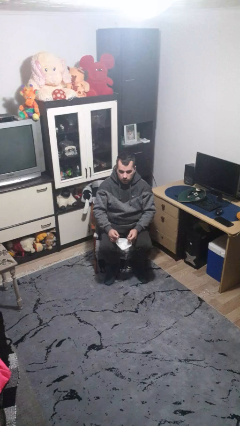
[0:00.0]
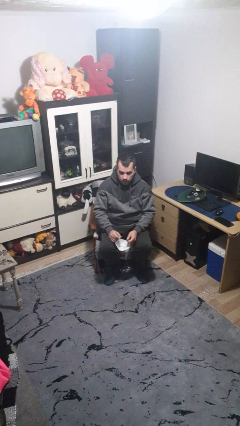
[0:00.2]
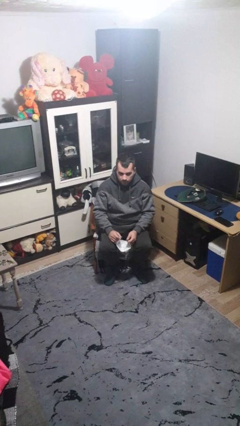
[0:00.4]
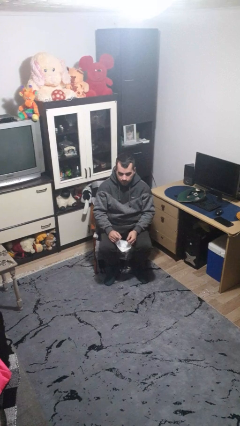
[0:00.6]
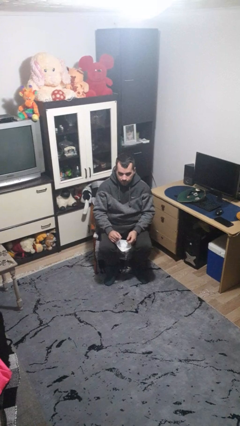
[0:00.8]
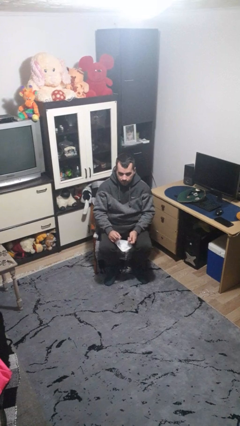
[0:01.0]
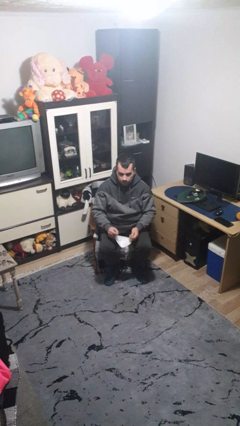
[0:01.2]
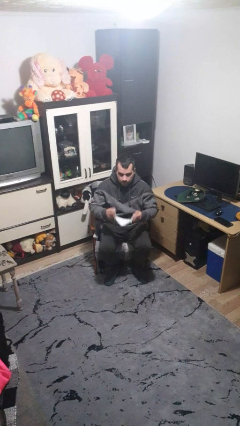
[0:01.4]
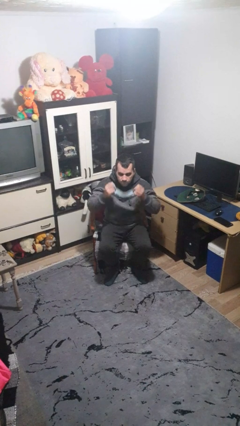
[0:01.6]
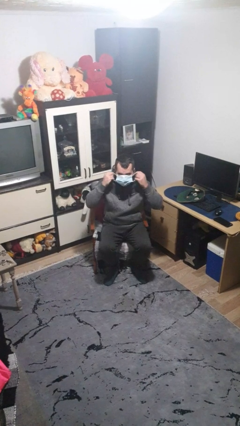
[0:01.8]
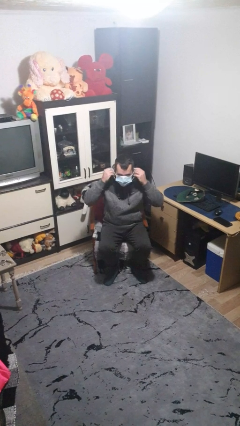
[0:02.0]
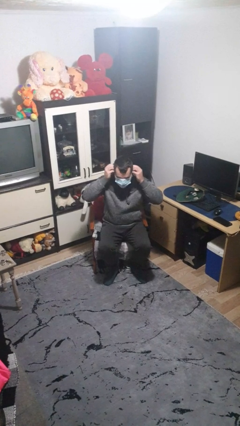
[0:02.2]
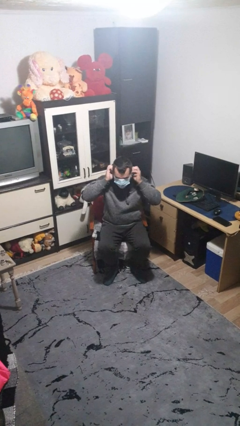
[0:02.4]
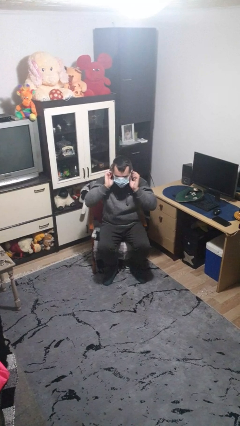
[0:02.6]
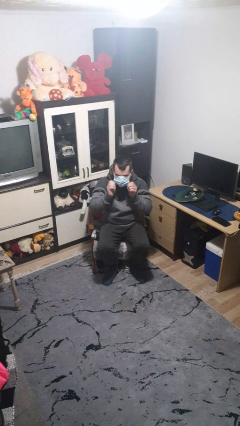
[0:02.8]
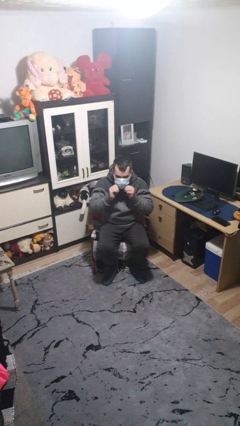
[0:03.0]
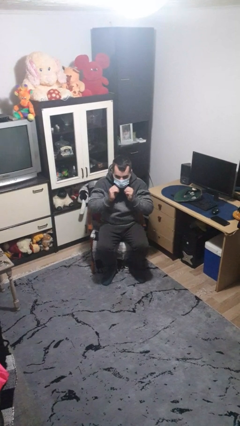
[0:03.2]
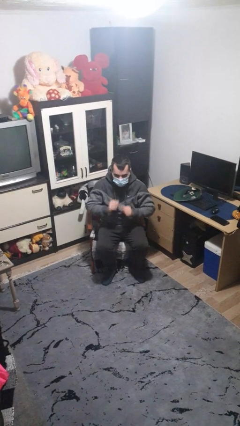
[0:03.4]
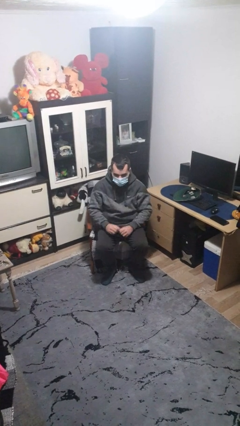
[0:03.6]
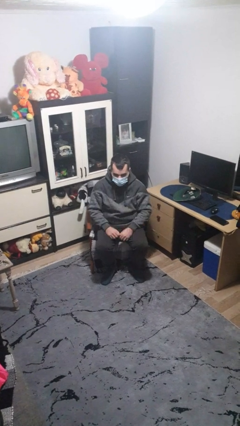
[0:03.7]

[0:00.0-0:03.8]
person puts on facemask

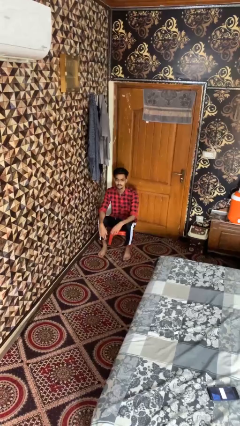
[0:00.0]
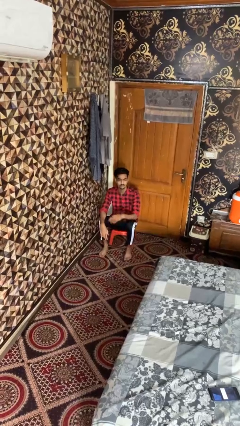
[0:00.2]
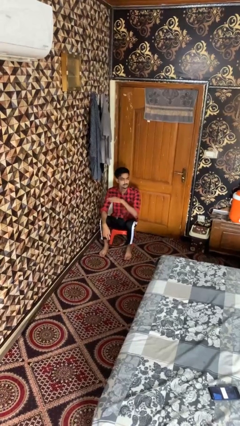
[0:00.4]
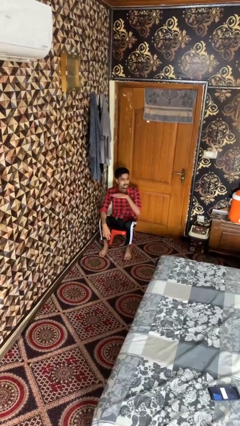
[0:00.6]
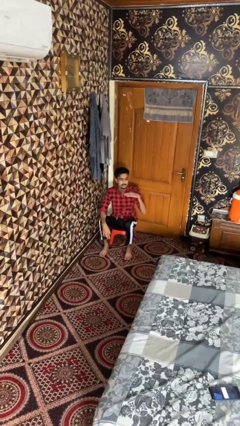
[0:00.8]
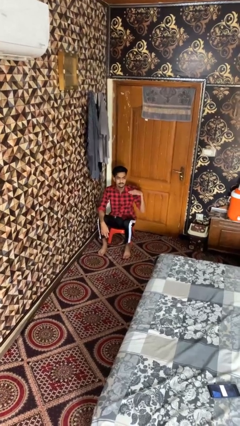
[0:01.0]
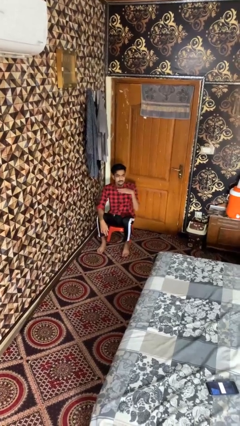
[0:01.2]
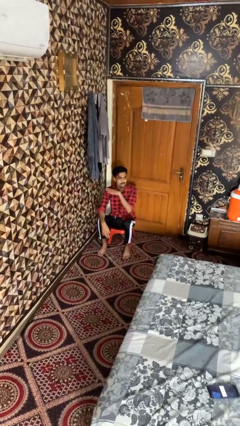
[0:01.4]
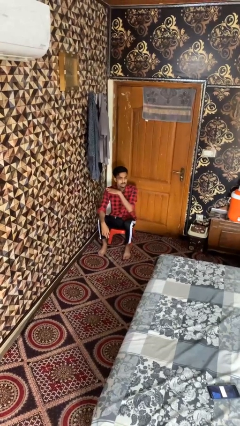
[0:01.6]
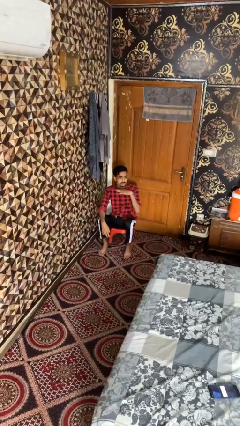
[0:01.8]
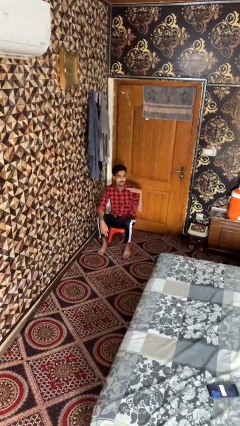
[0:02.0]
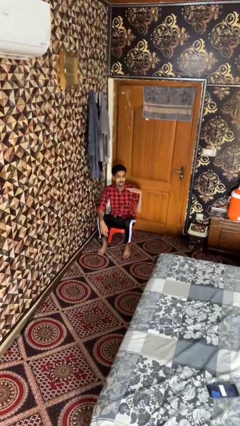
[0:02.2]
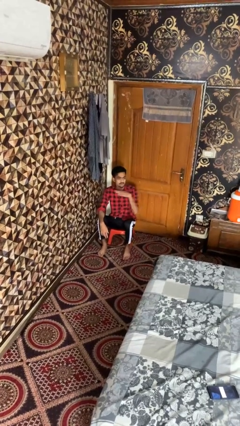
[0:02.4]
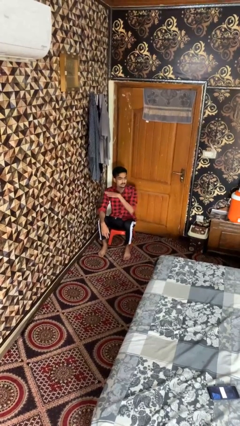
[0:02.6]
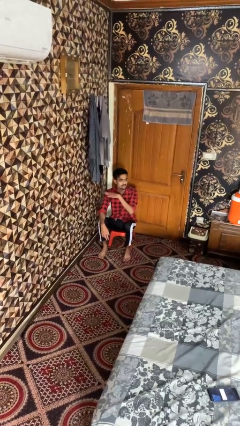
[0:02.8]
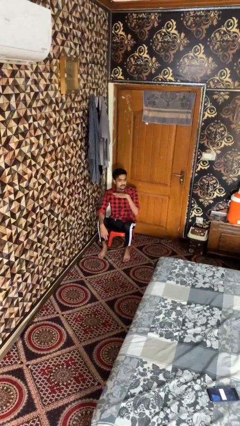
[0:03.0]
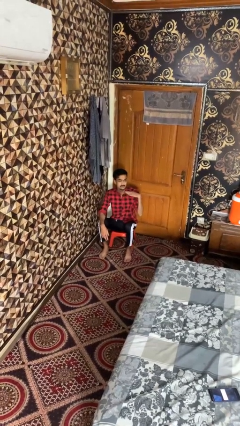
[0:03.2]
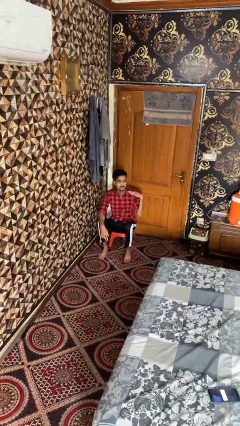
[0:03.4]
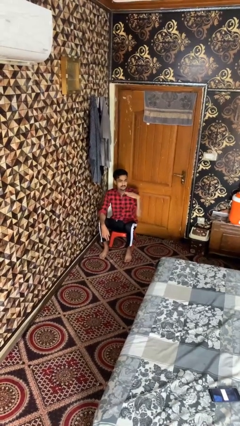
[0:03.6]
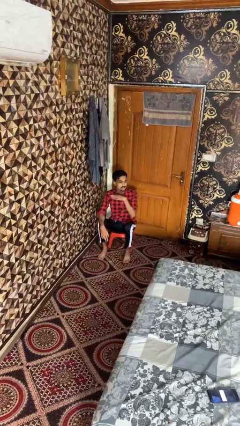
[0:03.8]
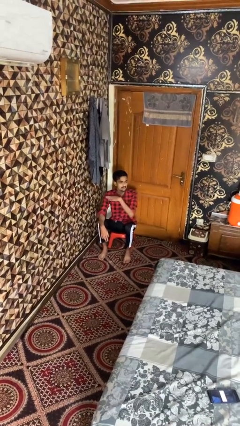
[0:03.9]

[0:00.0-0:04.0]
person gestures cut

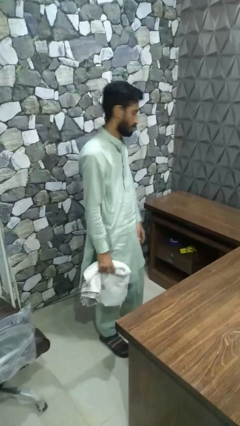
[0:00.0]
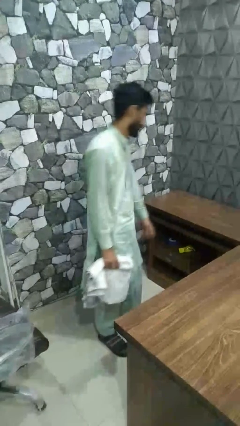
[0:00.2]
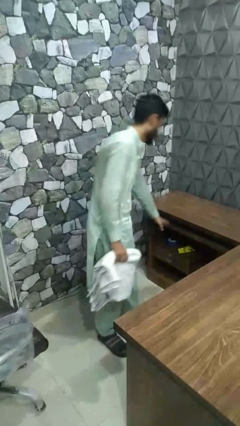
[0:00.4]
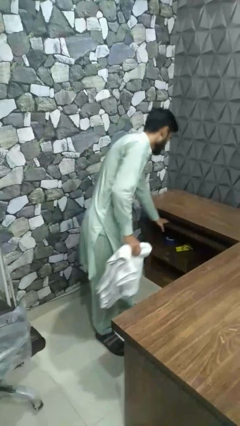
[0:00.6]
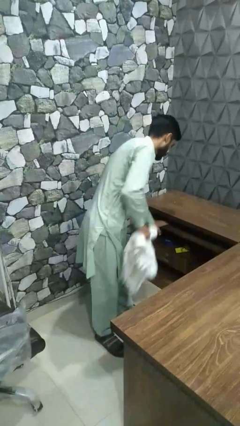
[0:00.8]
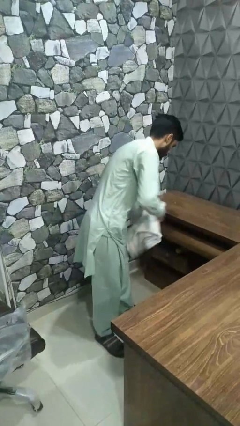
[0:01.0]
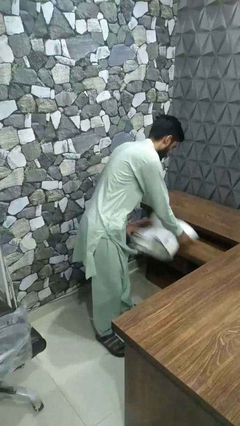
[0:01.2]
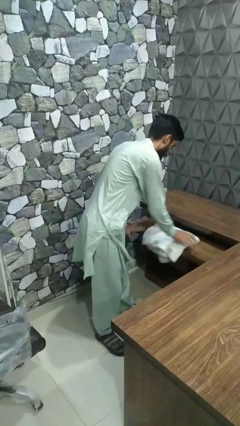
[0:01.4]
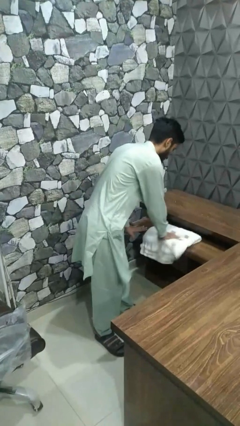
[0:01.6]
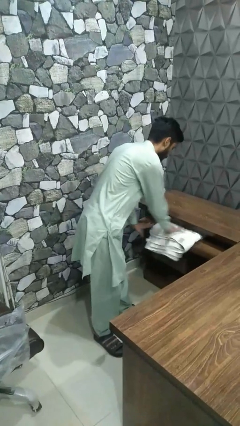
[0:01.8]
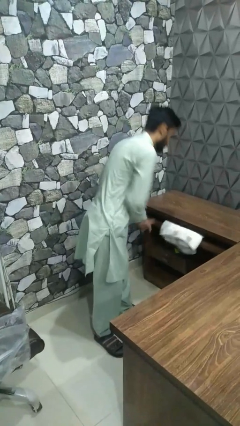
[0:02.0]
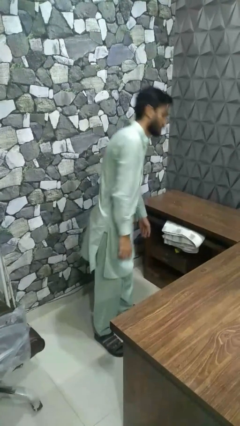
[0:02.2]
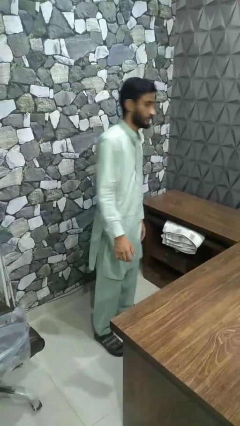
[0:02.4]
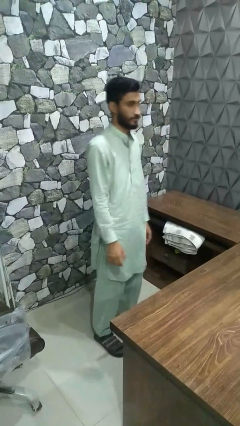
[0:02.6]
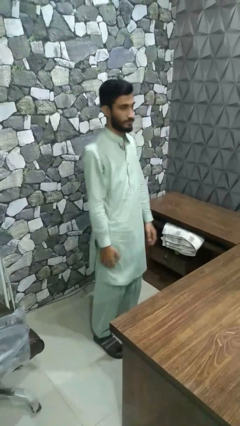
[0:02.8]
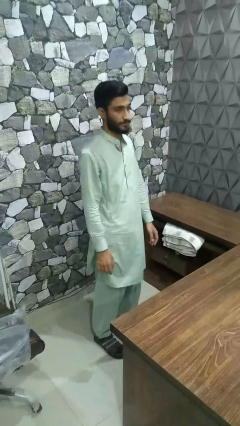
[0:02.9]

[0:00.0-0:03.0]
person puts clothes into dresser

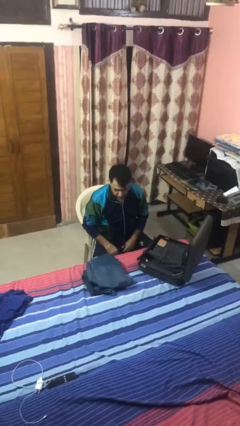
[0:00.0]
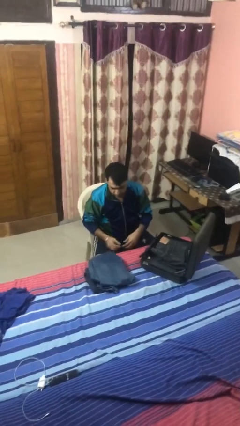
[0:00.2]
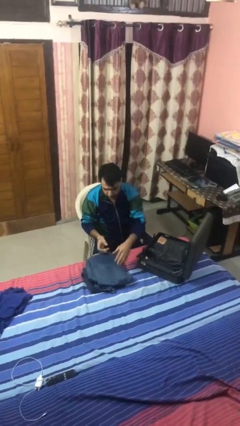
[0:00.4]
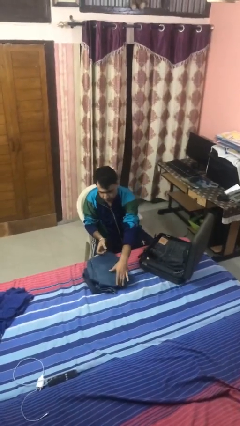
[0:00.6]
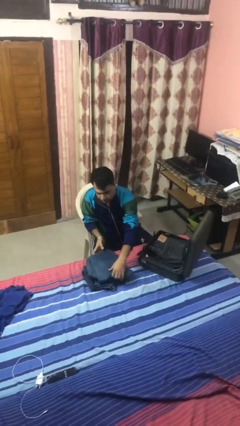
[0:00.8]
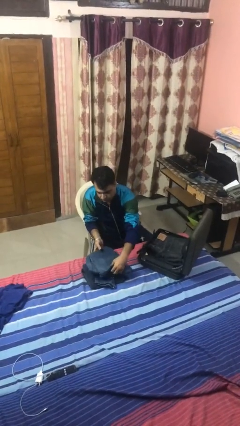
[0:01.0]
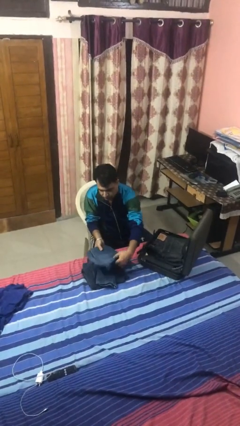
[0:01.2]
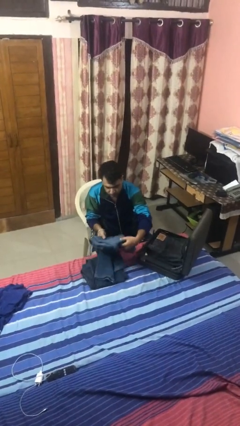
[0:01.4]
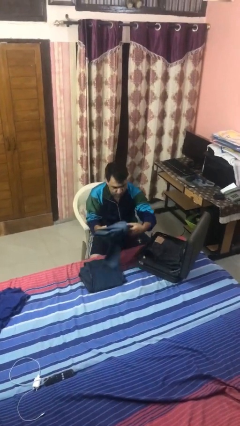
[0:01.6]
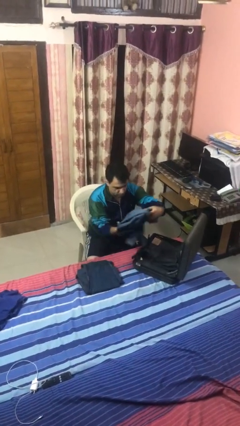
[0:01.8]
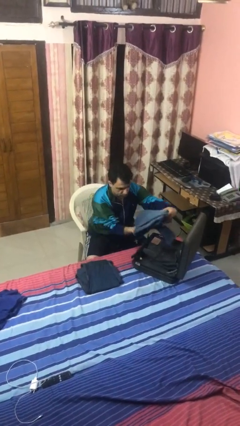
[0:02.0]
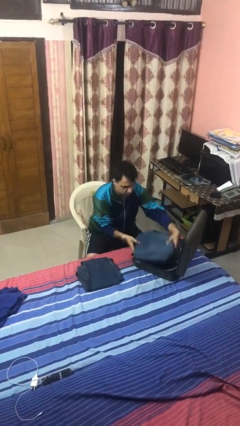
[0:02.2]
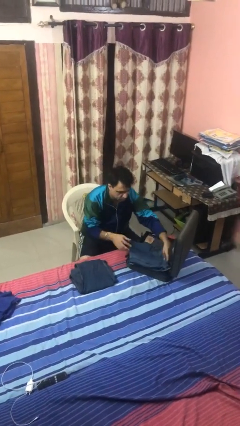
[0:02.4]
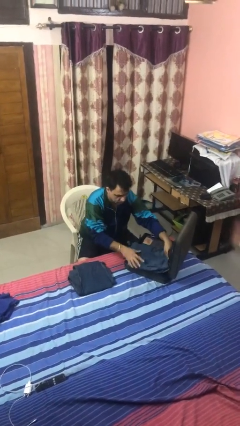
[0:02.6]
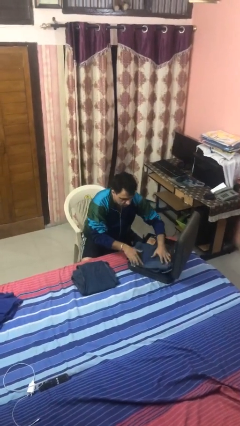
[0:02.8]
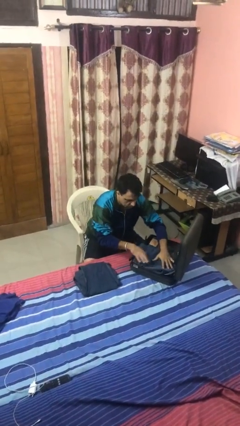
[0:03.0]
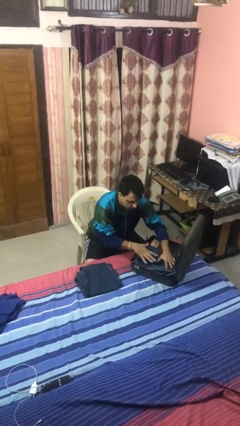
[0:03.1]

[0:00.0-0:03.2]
person loads clothes into suitcase

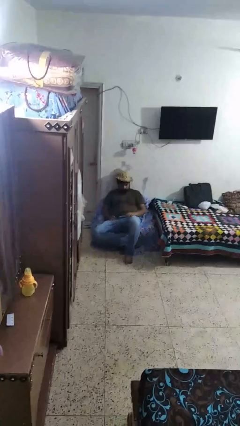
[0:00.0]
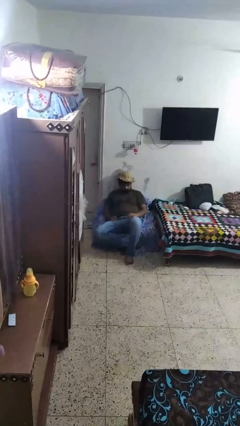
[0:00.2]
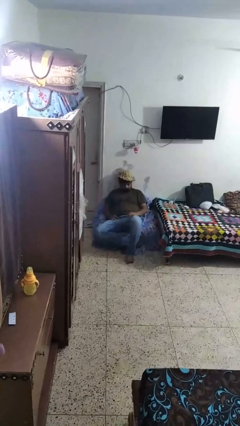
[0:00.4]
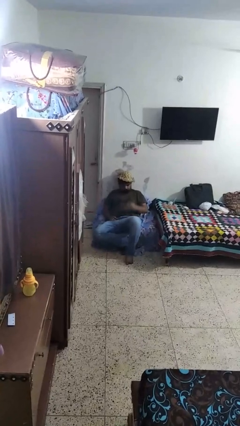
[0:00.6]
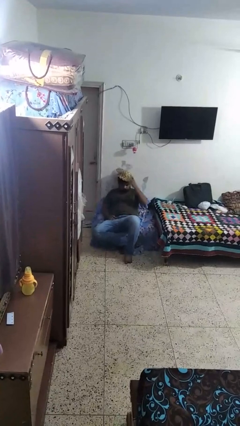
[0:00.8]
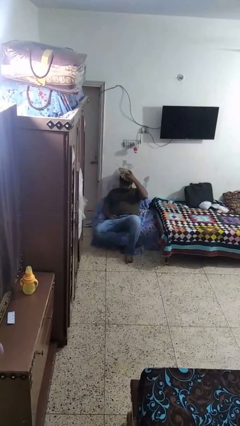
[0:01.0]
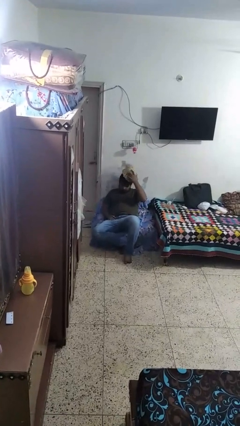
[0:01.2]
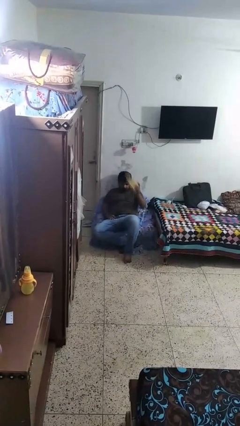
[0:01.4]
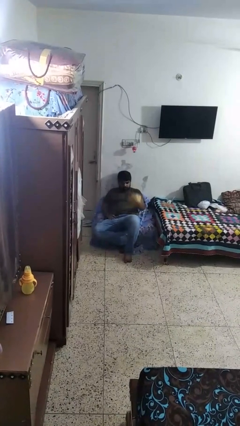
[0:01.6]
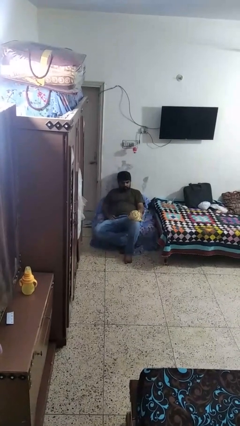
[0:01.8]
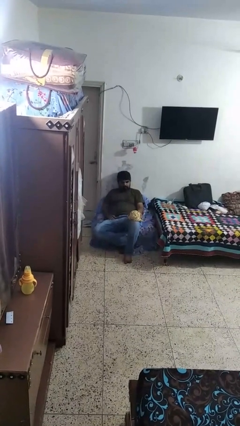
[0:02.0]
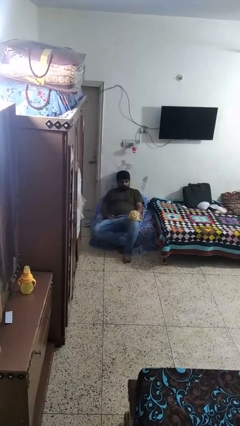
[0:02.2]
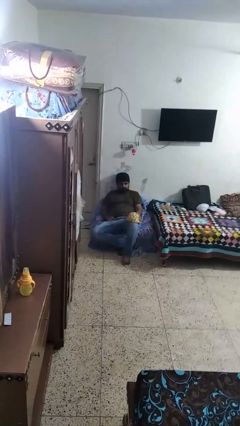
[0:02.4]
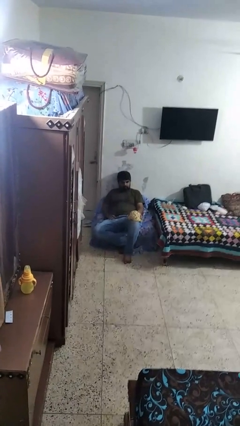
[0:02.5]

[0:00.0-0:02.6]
person takes off hat

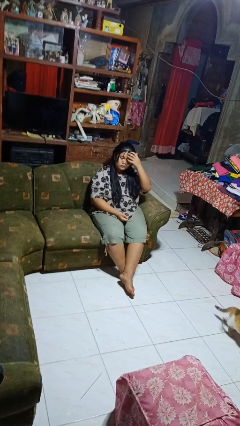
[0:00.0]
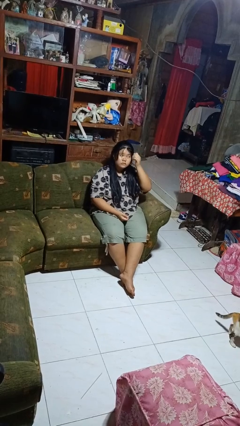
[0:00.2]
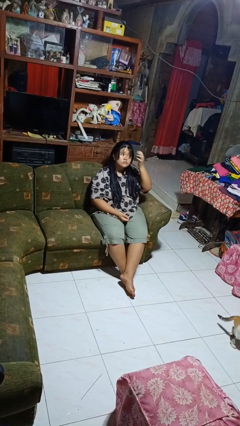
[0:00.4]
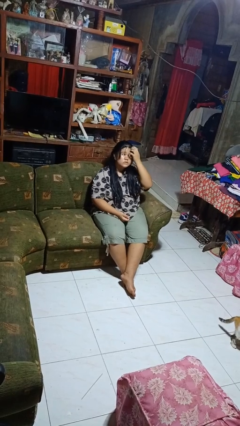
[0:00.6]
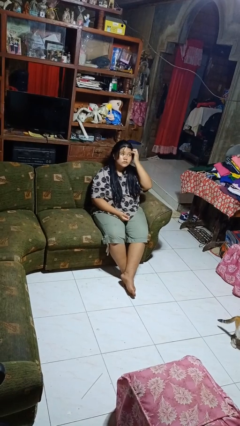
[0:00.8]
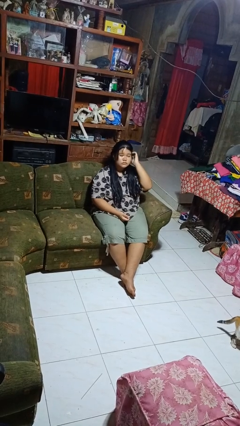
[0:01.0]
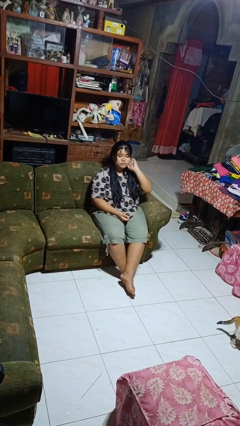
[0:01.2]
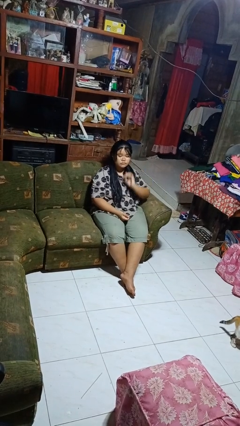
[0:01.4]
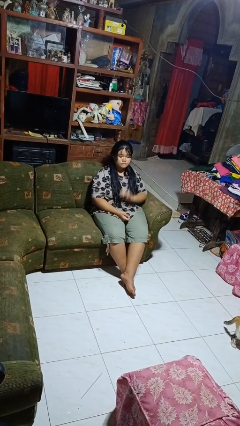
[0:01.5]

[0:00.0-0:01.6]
person strokes hair
